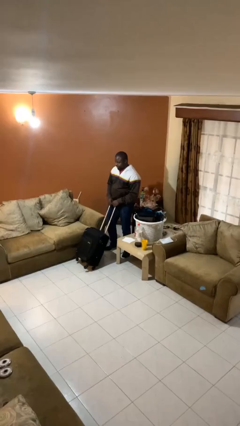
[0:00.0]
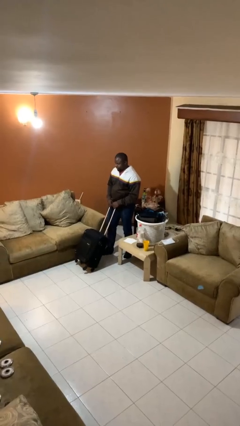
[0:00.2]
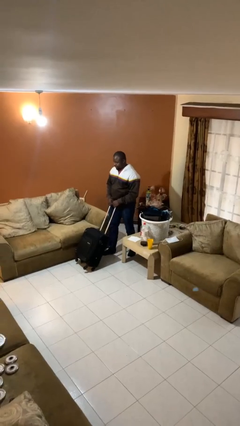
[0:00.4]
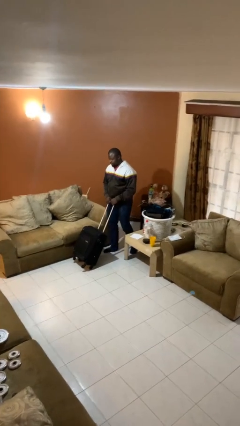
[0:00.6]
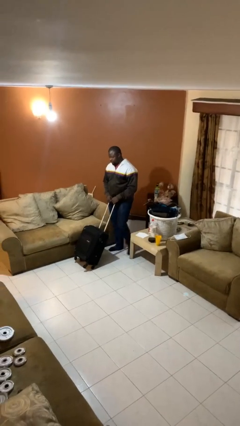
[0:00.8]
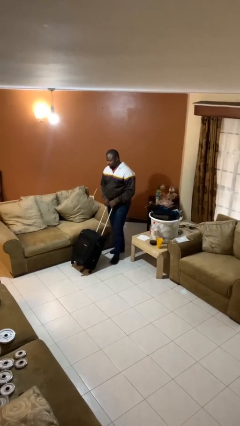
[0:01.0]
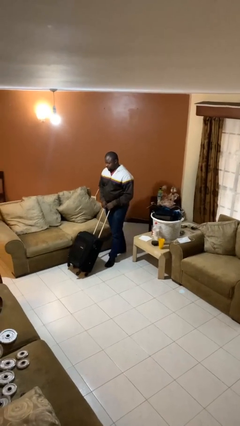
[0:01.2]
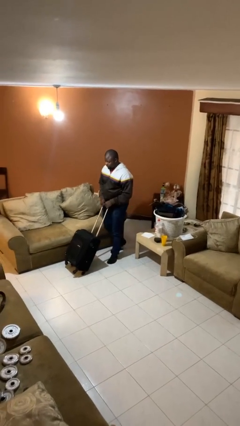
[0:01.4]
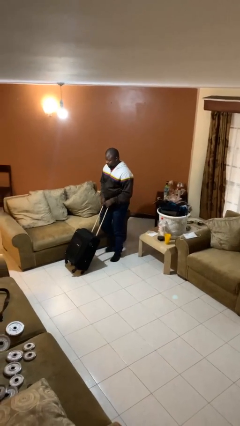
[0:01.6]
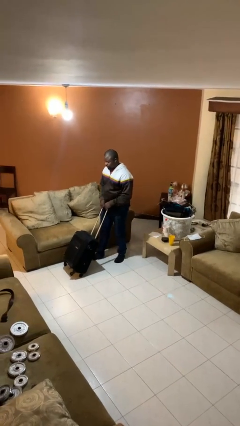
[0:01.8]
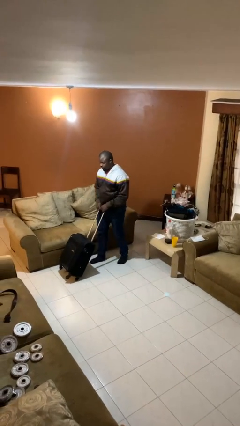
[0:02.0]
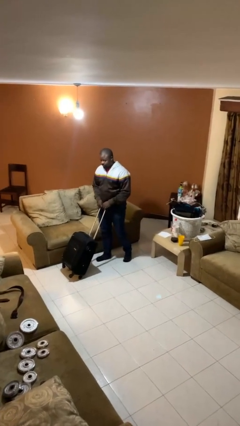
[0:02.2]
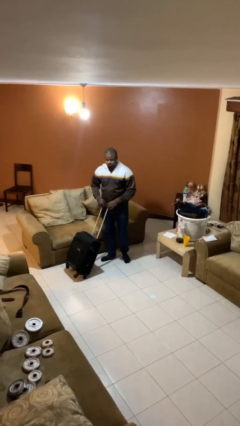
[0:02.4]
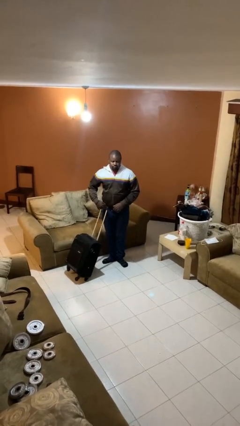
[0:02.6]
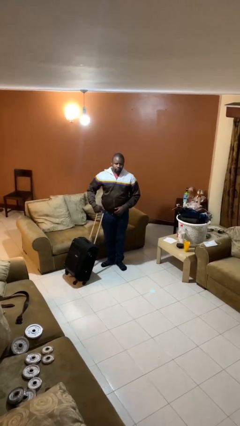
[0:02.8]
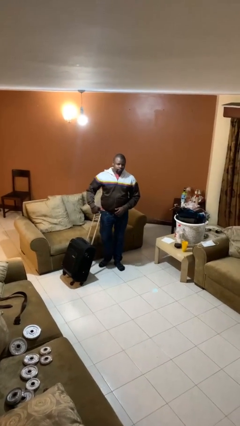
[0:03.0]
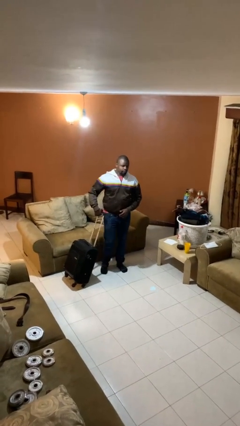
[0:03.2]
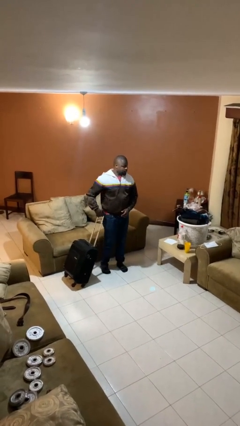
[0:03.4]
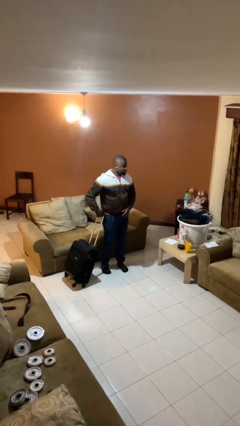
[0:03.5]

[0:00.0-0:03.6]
person pushes wheeled cart

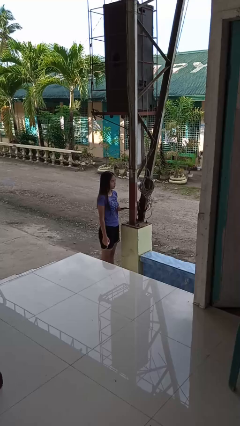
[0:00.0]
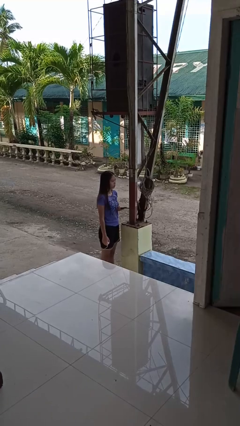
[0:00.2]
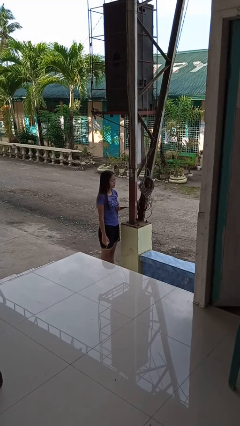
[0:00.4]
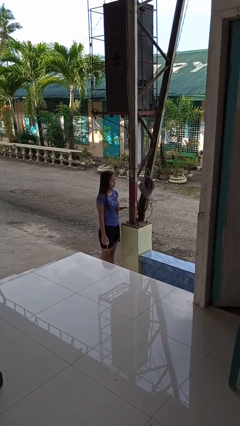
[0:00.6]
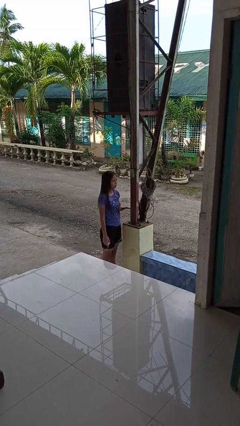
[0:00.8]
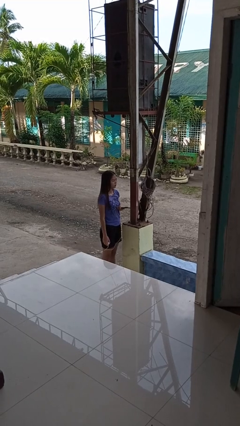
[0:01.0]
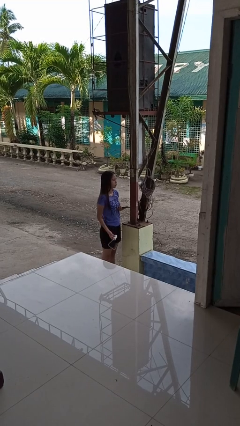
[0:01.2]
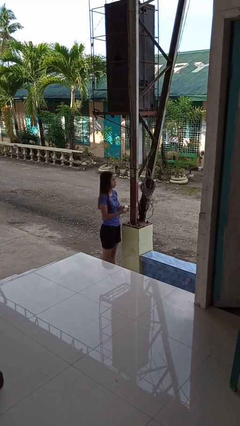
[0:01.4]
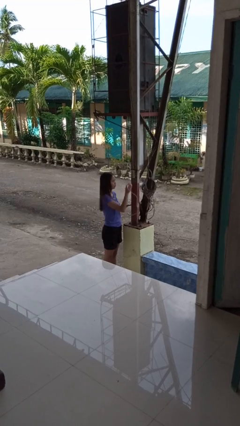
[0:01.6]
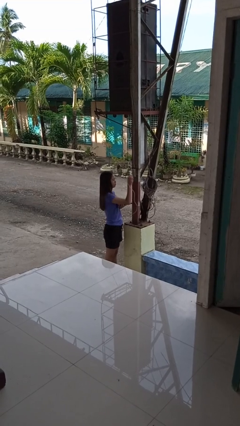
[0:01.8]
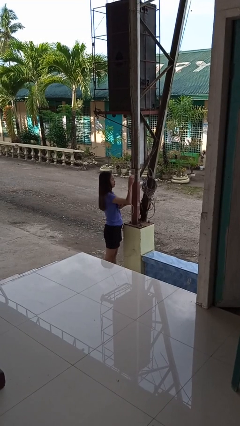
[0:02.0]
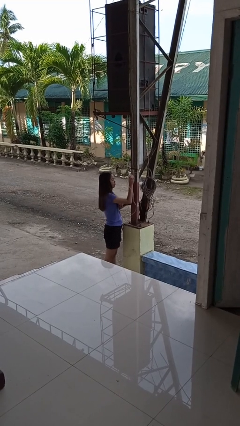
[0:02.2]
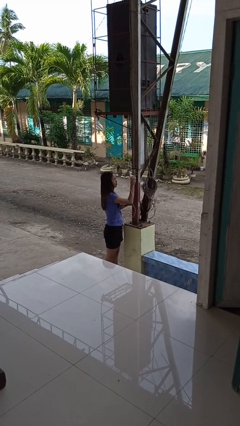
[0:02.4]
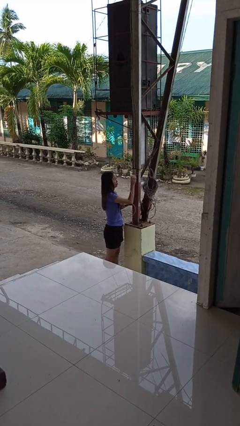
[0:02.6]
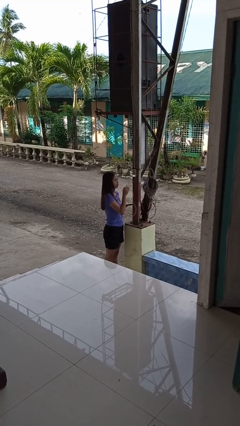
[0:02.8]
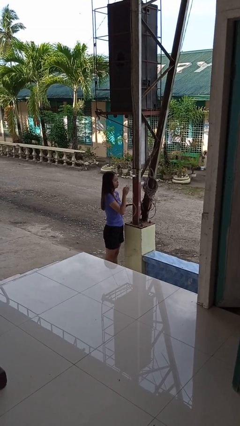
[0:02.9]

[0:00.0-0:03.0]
person plugs into electrical socket

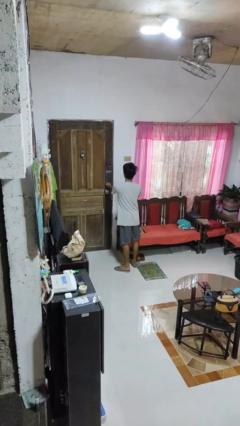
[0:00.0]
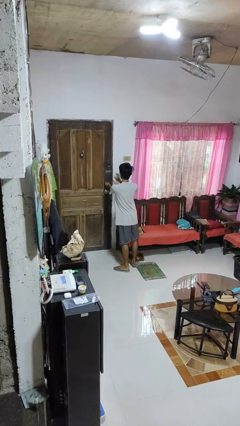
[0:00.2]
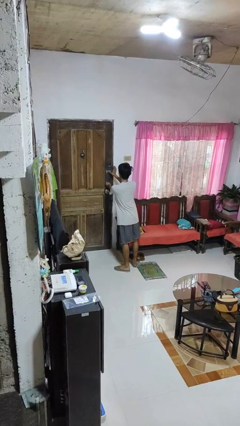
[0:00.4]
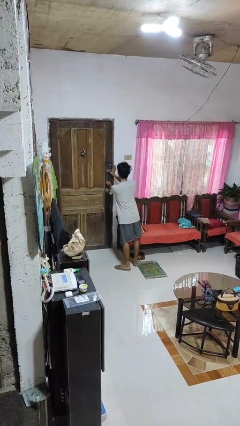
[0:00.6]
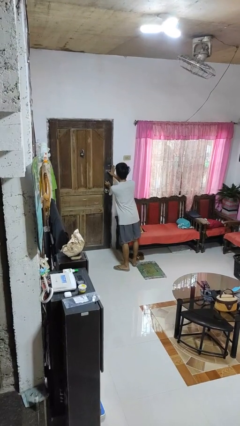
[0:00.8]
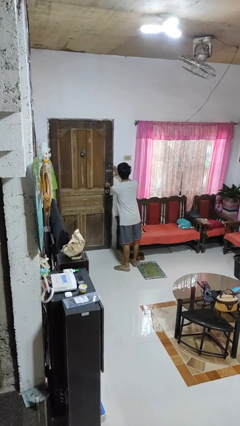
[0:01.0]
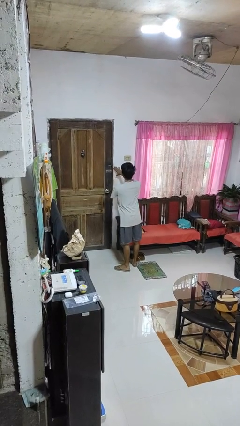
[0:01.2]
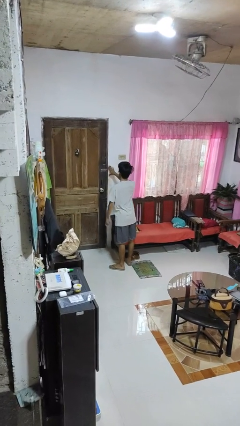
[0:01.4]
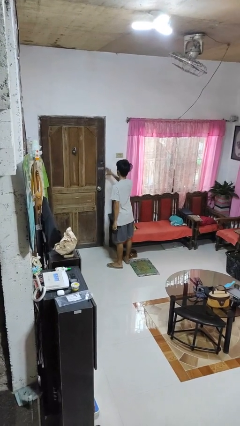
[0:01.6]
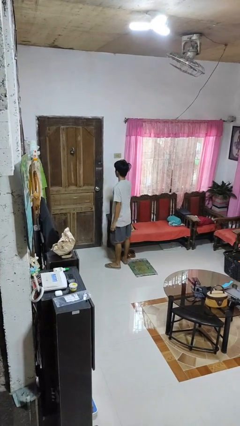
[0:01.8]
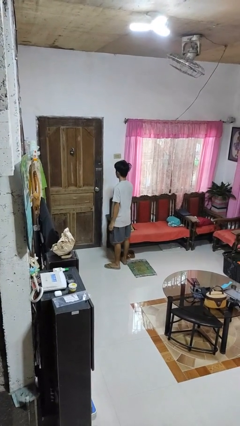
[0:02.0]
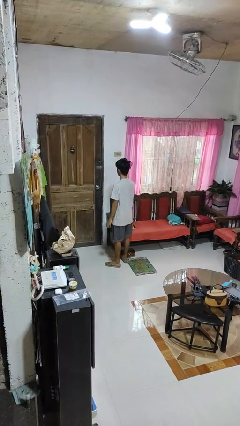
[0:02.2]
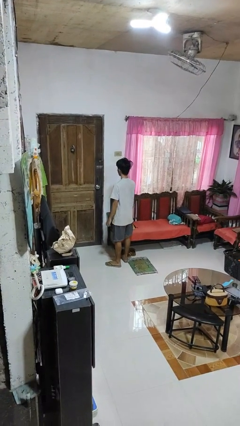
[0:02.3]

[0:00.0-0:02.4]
person locks door with keys

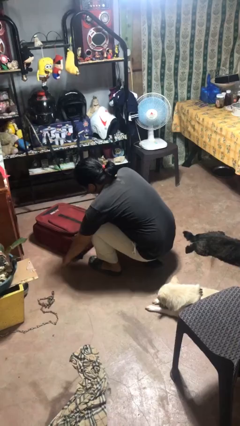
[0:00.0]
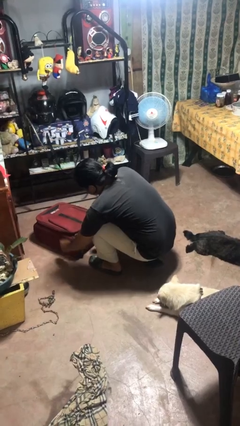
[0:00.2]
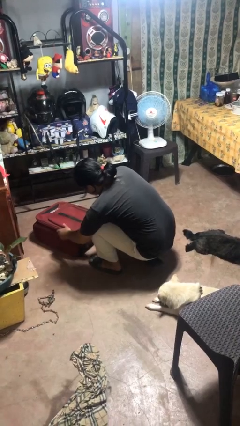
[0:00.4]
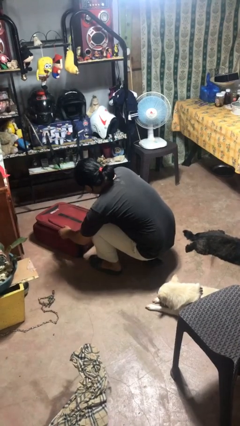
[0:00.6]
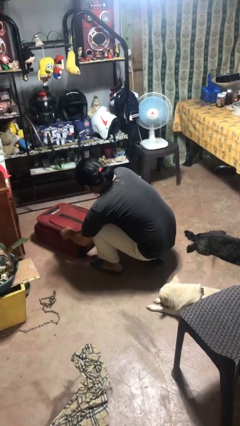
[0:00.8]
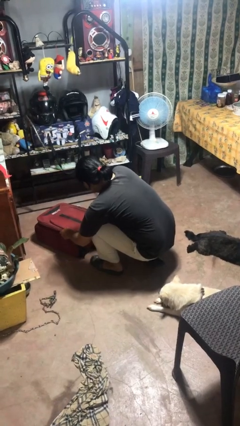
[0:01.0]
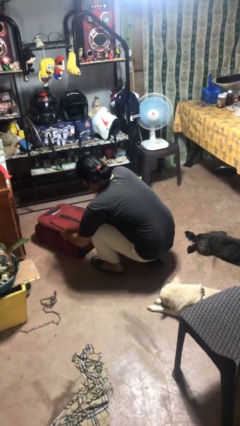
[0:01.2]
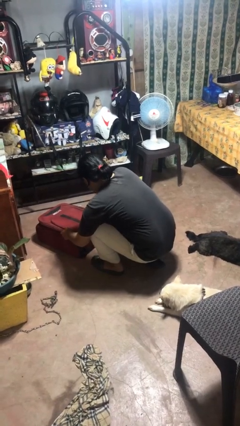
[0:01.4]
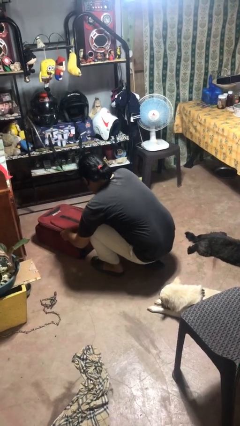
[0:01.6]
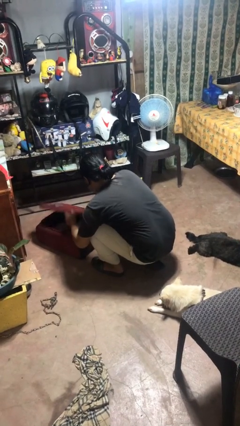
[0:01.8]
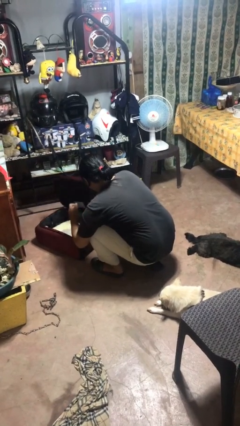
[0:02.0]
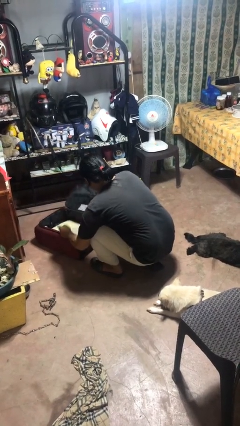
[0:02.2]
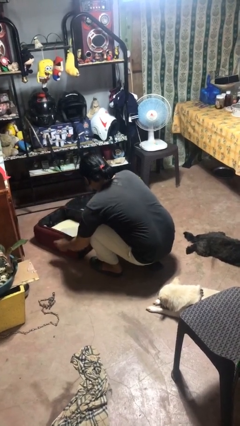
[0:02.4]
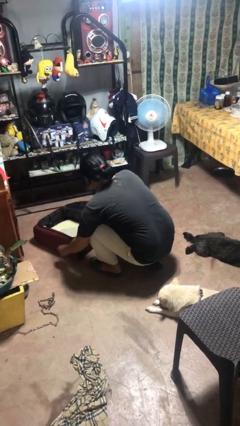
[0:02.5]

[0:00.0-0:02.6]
person opens suitcase

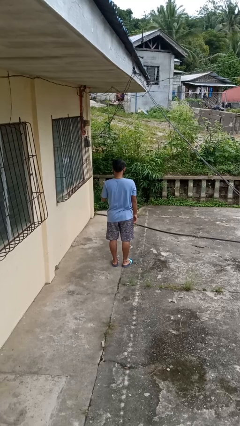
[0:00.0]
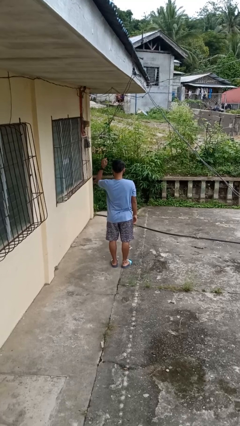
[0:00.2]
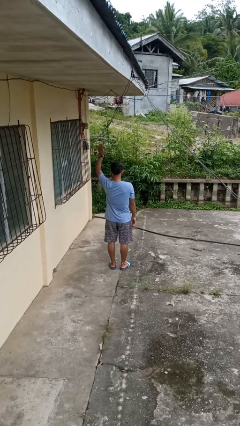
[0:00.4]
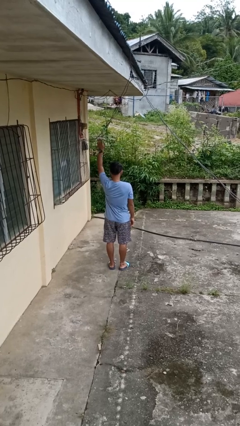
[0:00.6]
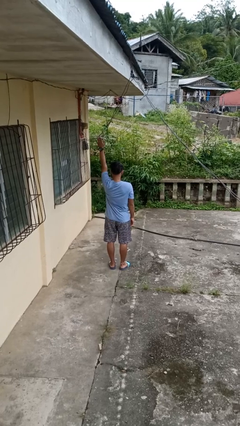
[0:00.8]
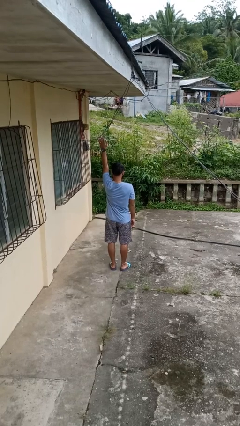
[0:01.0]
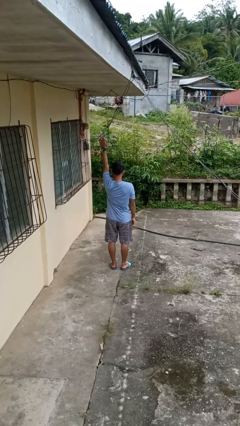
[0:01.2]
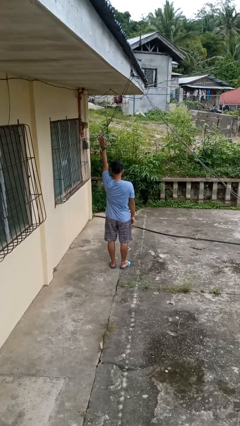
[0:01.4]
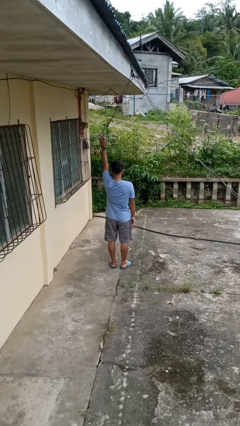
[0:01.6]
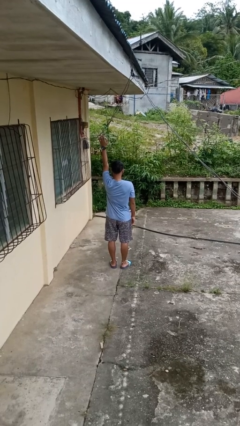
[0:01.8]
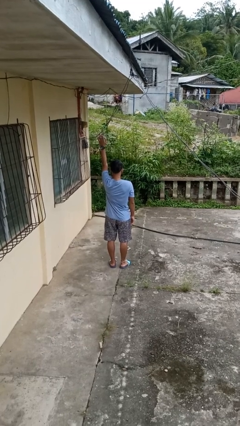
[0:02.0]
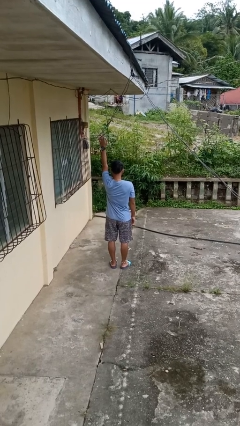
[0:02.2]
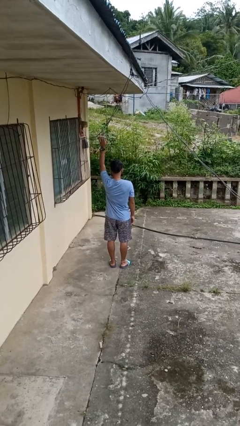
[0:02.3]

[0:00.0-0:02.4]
person gestures raise hand

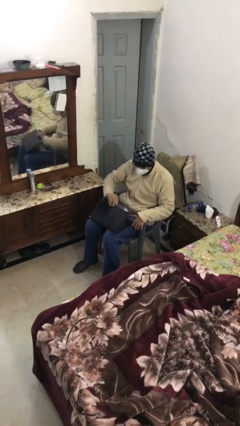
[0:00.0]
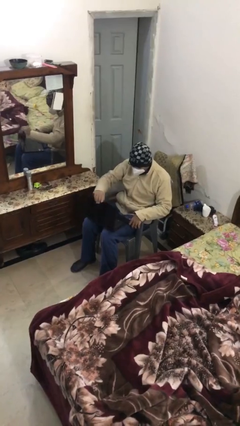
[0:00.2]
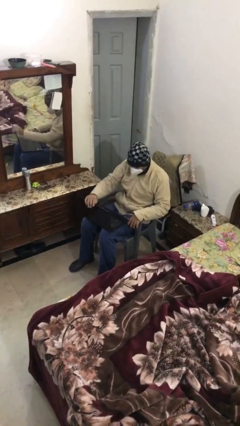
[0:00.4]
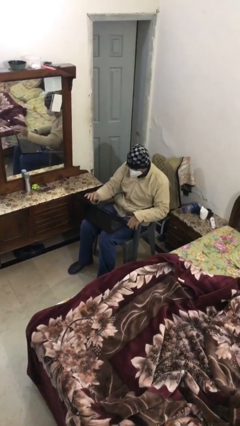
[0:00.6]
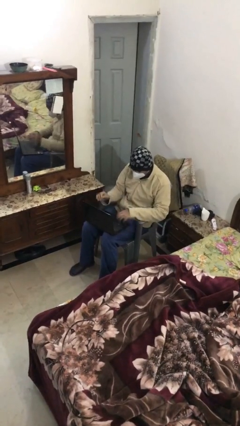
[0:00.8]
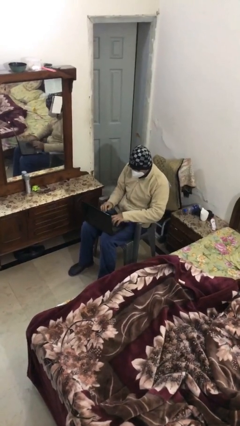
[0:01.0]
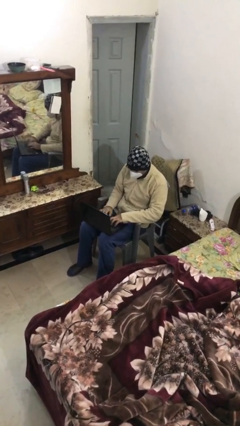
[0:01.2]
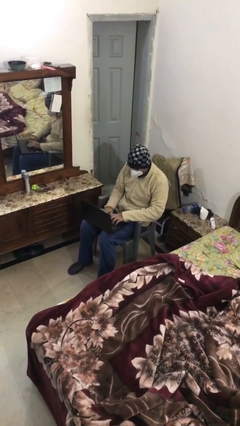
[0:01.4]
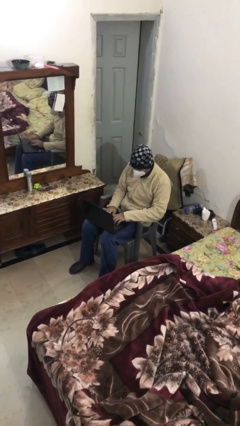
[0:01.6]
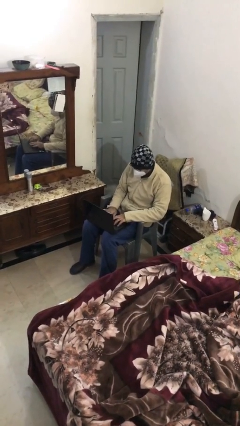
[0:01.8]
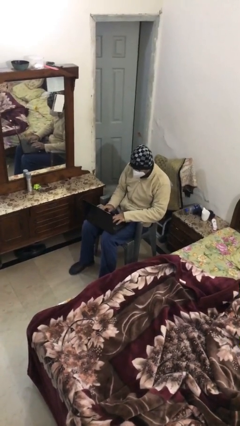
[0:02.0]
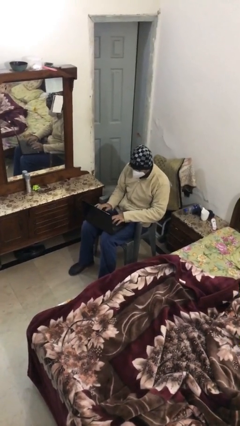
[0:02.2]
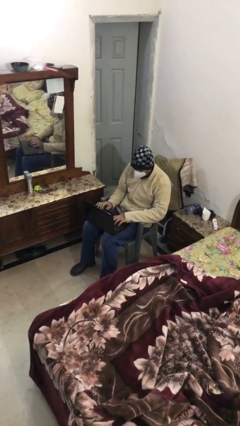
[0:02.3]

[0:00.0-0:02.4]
person interacts with laptop

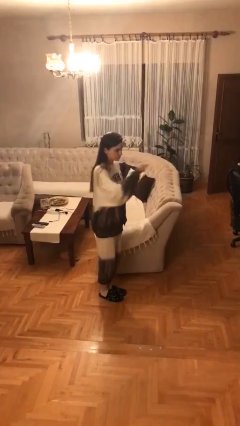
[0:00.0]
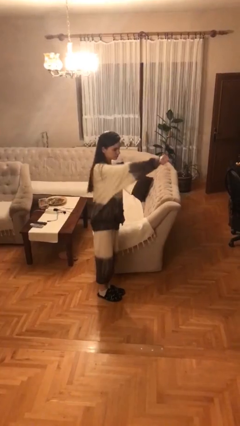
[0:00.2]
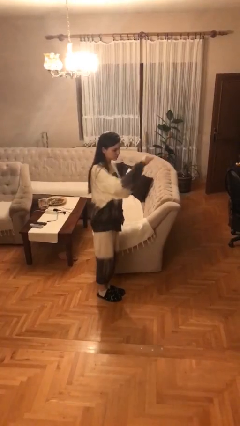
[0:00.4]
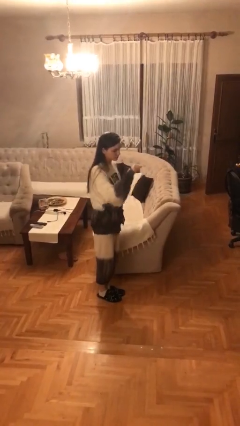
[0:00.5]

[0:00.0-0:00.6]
person punches

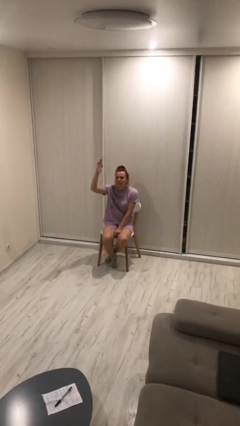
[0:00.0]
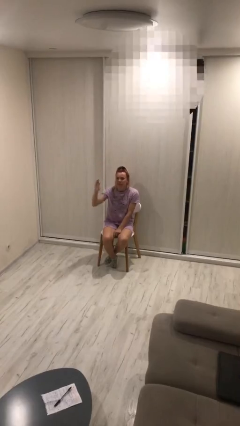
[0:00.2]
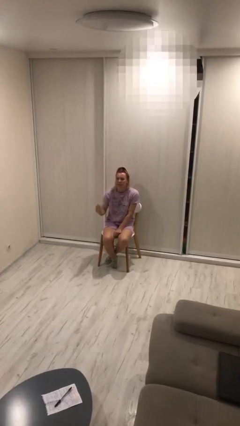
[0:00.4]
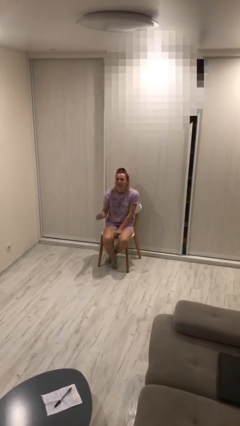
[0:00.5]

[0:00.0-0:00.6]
person gestures lower hand
